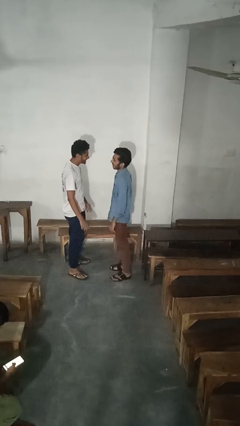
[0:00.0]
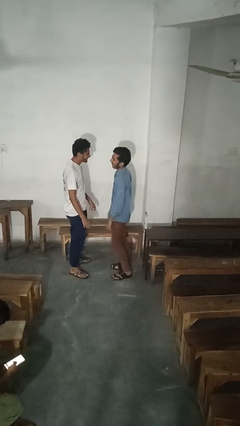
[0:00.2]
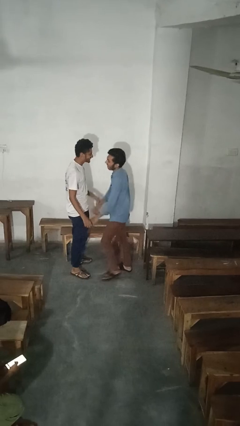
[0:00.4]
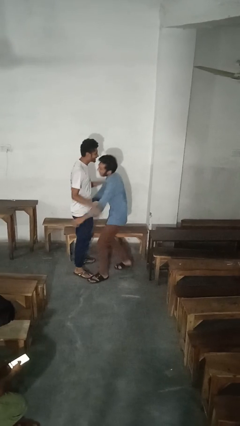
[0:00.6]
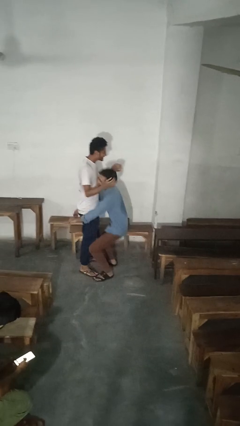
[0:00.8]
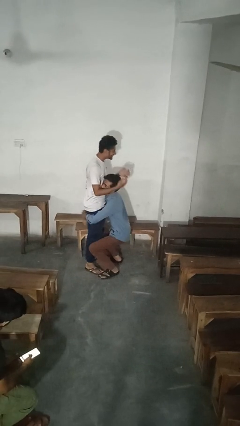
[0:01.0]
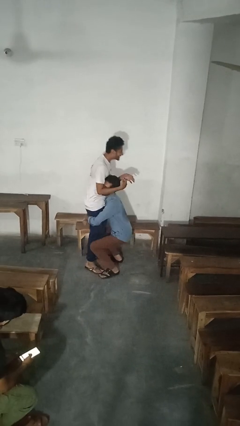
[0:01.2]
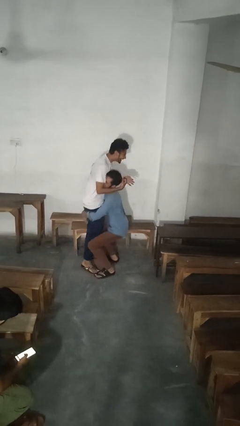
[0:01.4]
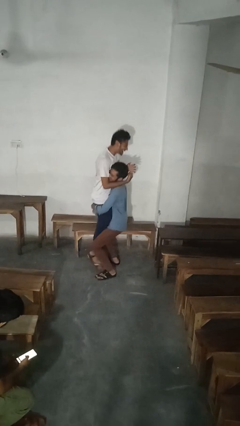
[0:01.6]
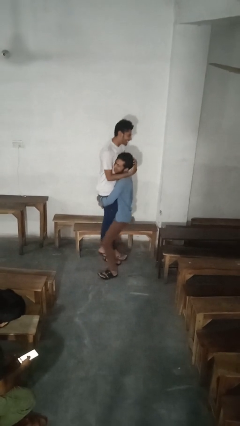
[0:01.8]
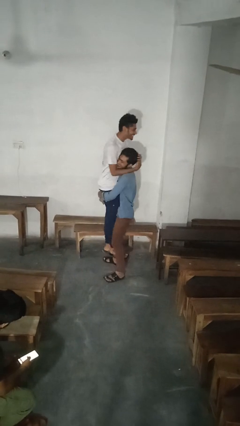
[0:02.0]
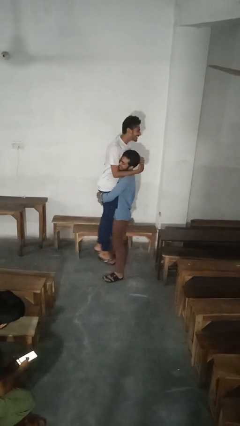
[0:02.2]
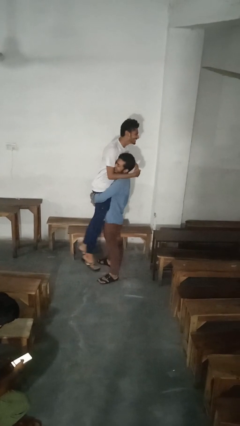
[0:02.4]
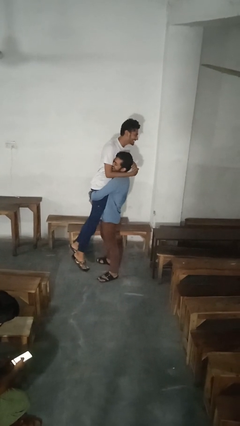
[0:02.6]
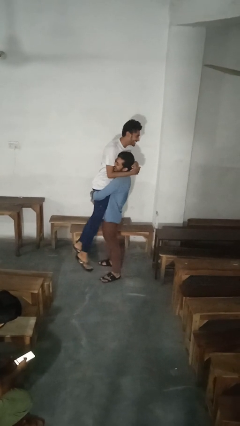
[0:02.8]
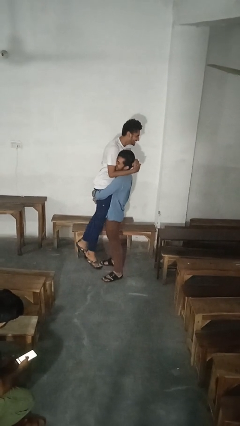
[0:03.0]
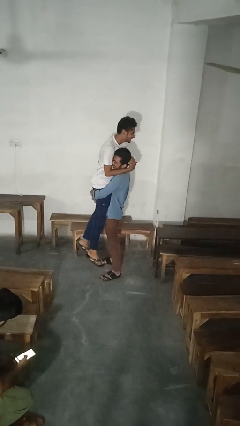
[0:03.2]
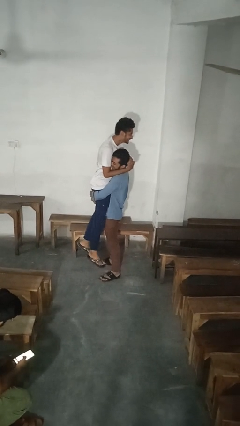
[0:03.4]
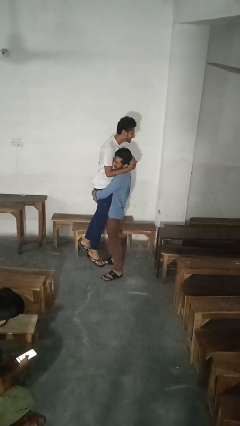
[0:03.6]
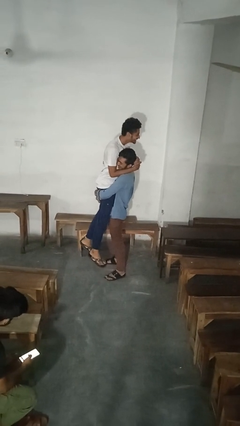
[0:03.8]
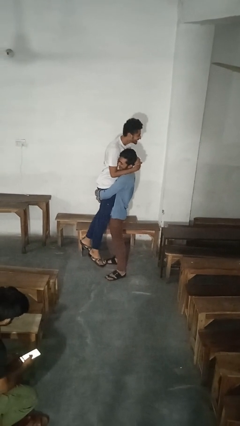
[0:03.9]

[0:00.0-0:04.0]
person picks up person

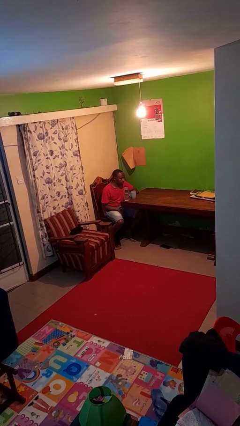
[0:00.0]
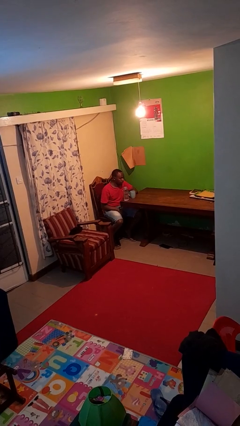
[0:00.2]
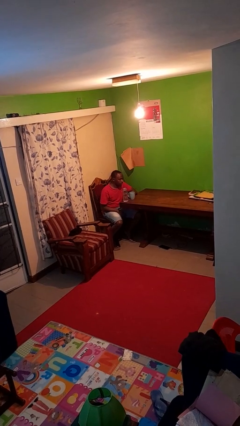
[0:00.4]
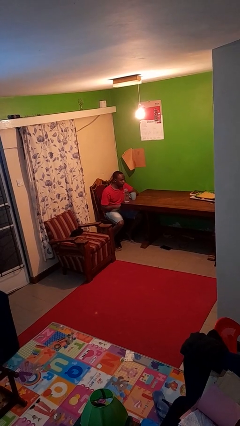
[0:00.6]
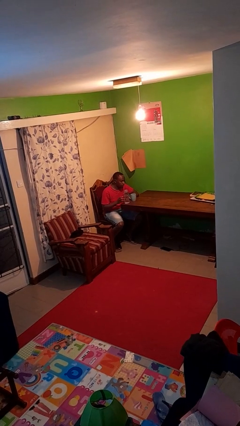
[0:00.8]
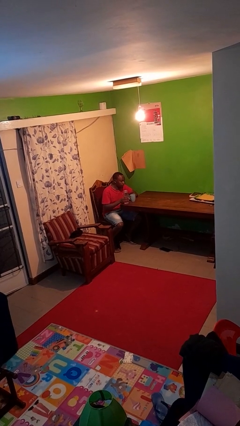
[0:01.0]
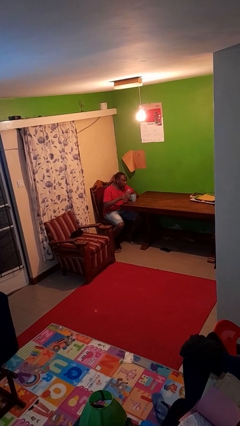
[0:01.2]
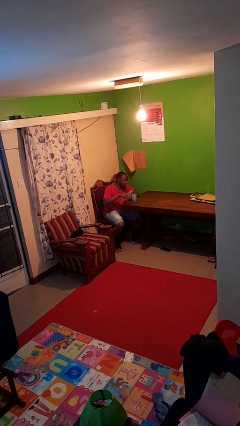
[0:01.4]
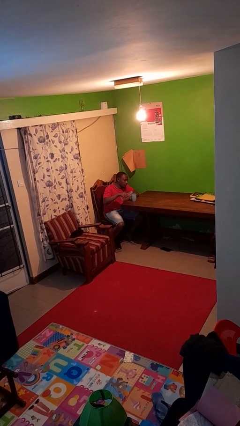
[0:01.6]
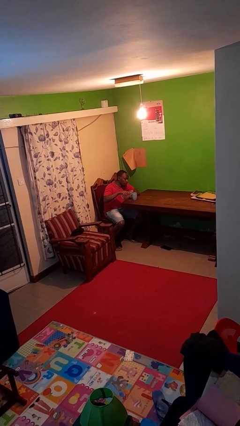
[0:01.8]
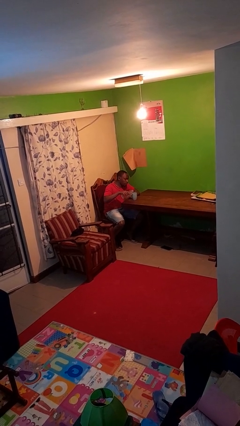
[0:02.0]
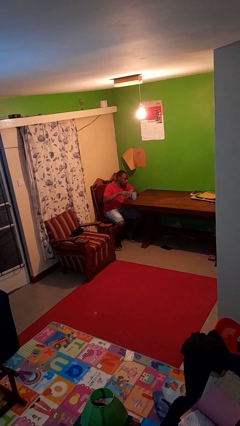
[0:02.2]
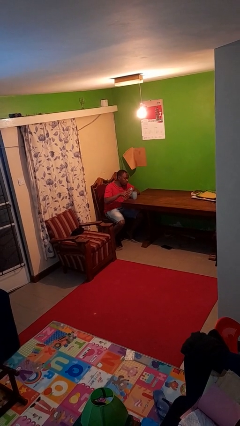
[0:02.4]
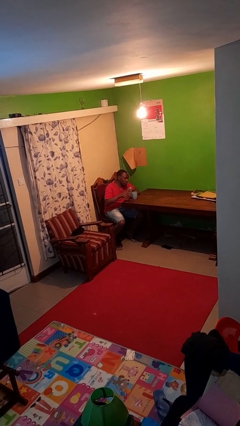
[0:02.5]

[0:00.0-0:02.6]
person pours liquid into cup

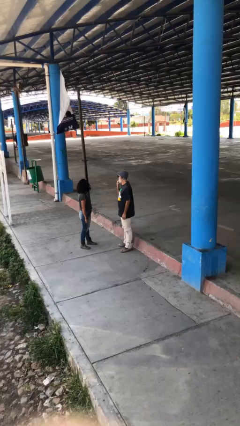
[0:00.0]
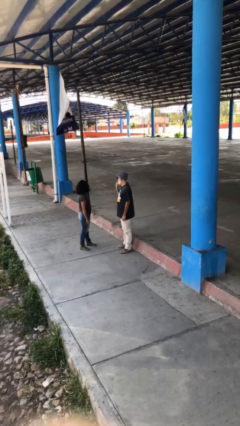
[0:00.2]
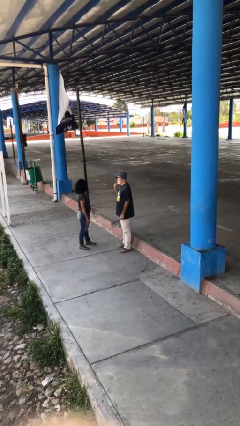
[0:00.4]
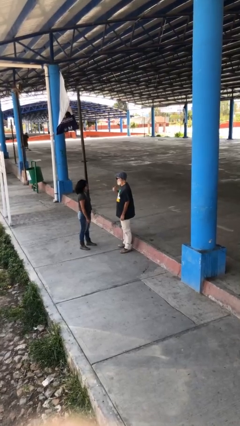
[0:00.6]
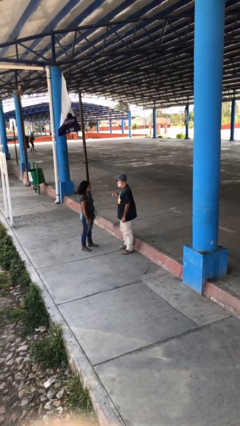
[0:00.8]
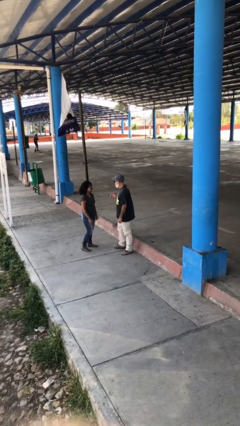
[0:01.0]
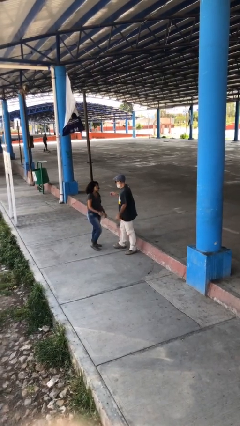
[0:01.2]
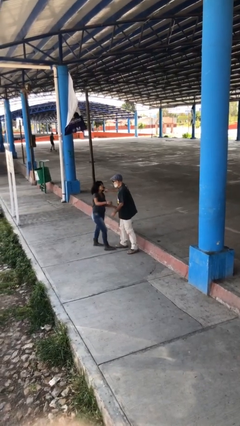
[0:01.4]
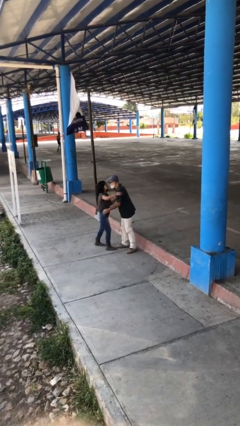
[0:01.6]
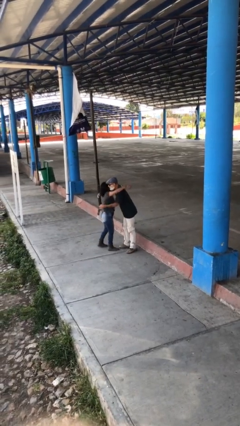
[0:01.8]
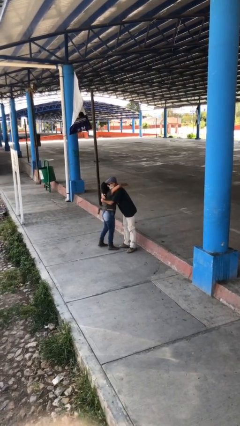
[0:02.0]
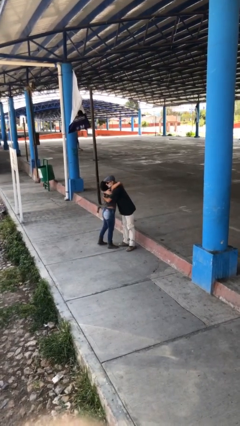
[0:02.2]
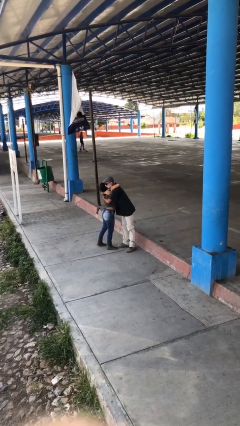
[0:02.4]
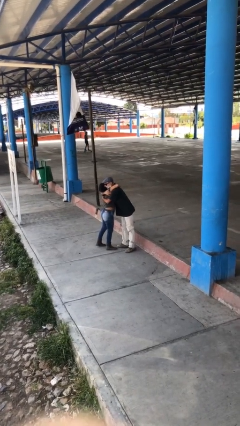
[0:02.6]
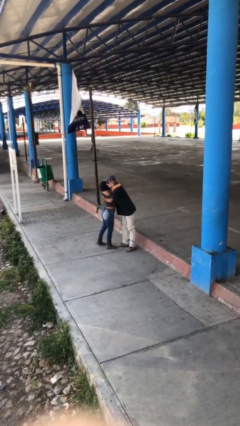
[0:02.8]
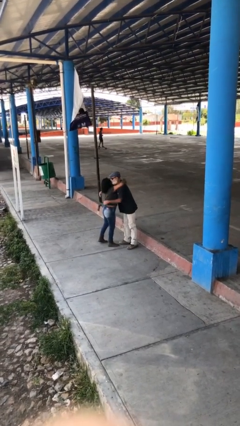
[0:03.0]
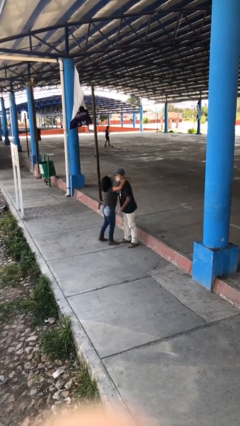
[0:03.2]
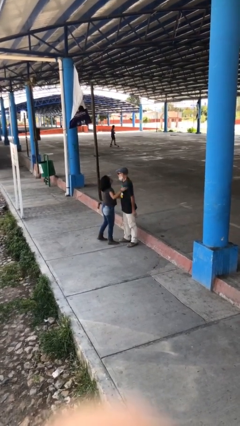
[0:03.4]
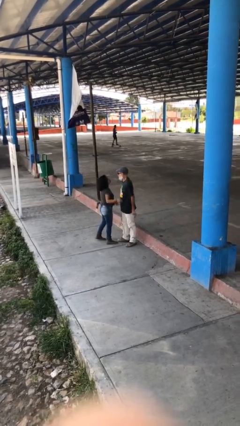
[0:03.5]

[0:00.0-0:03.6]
person embraces person

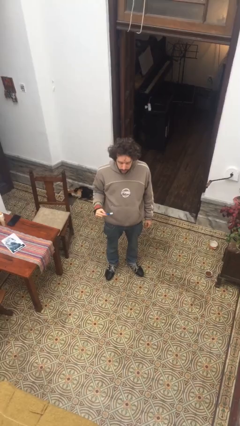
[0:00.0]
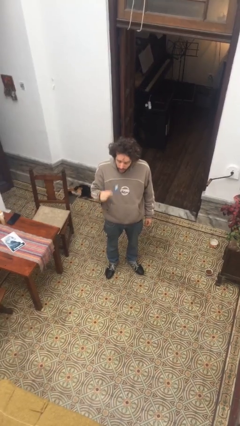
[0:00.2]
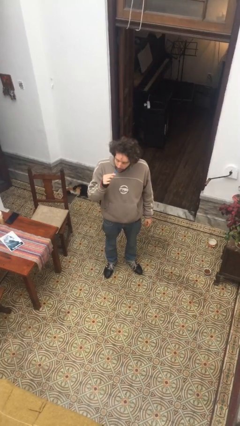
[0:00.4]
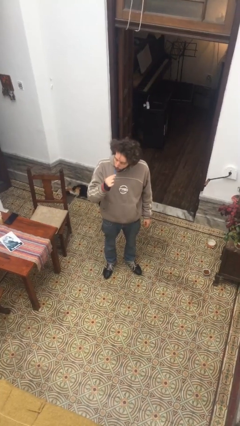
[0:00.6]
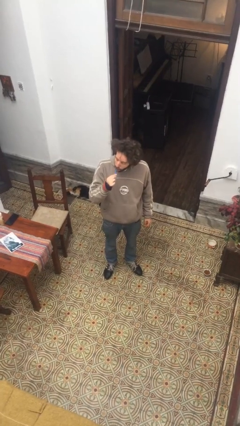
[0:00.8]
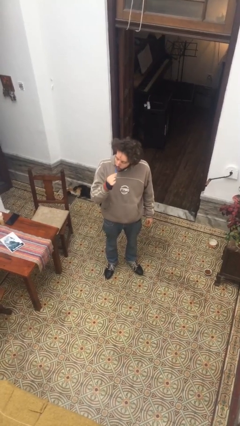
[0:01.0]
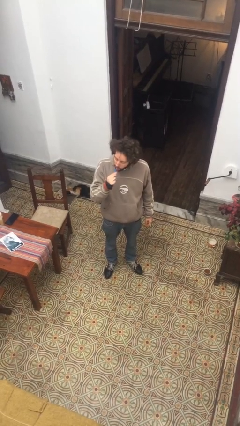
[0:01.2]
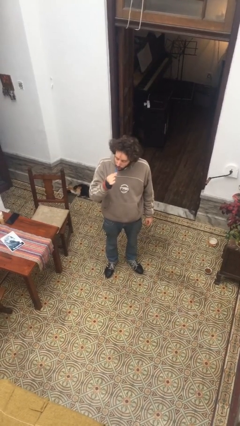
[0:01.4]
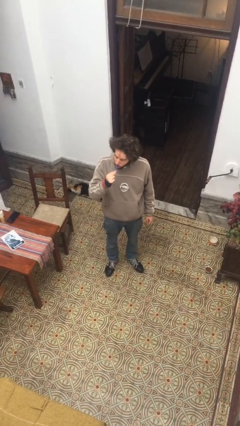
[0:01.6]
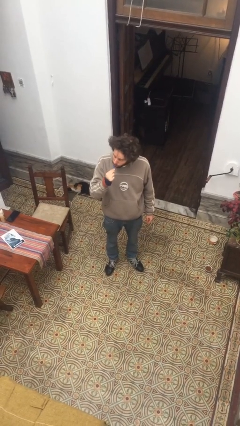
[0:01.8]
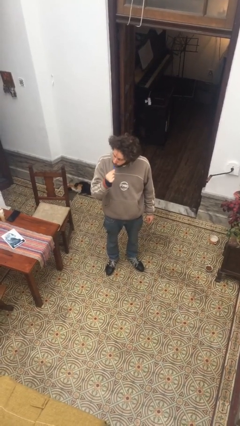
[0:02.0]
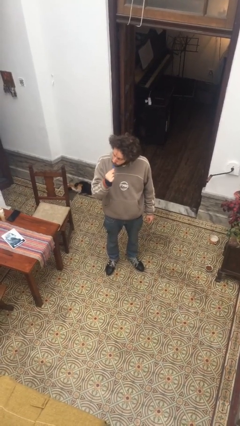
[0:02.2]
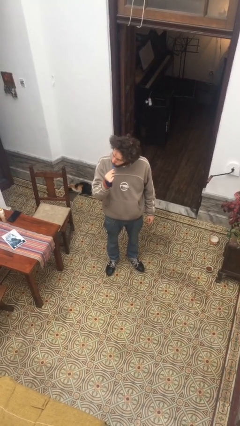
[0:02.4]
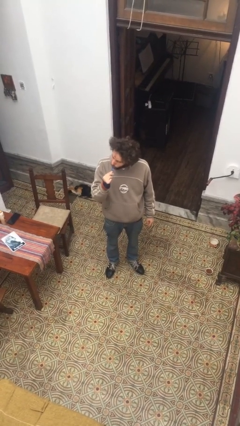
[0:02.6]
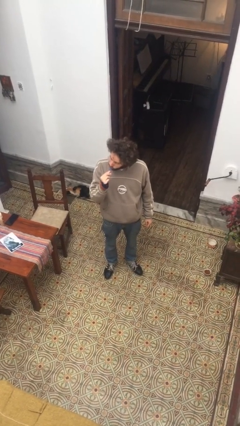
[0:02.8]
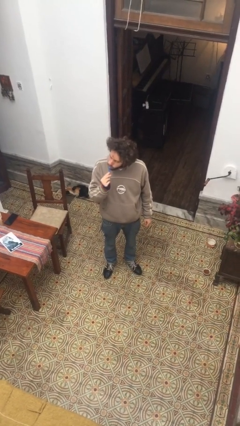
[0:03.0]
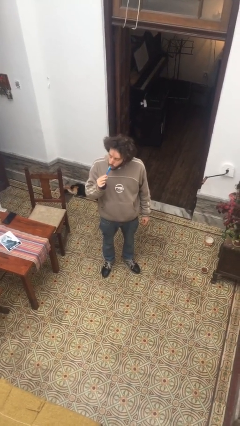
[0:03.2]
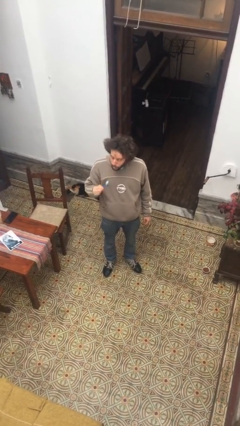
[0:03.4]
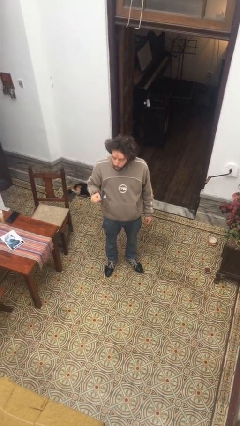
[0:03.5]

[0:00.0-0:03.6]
person brushes teeth

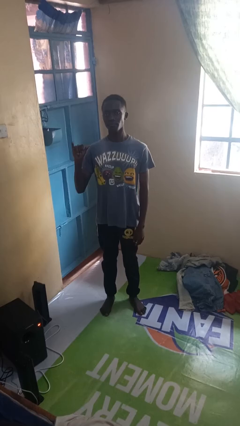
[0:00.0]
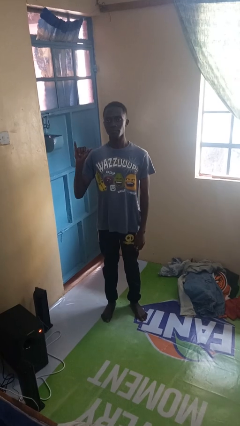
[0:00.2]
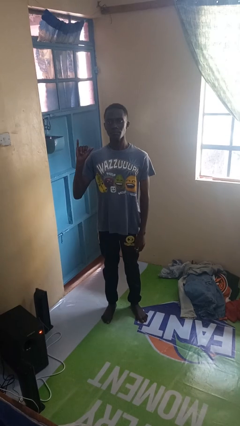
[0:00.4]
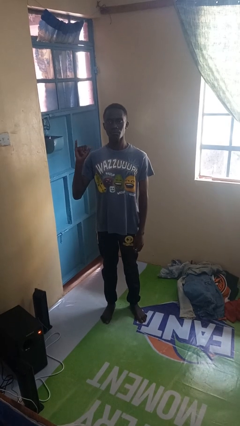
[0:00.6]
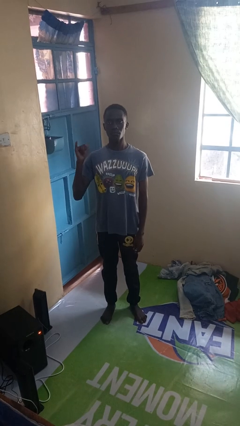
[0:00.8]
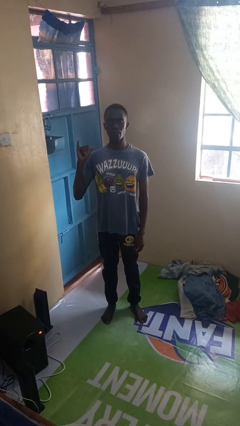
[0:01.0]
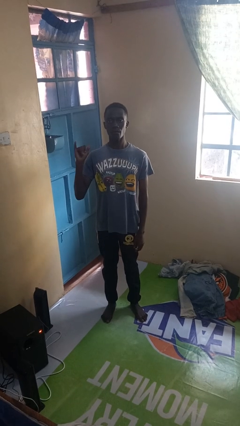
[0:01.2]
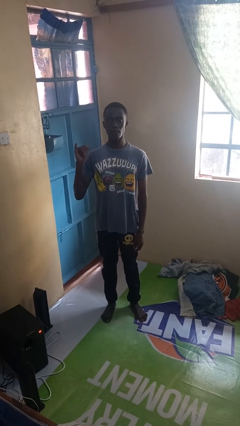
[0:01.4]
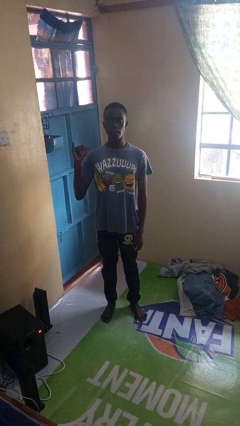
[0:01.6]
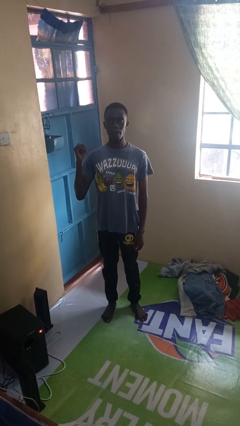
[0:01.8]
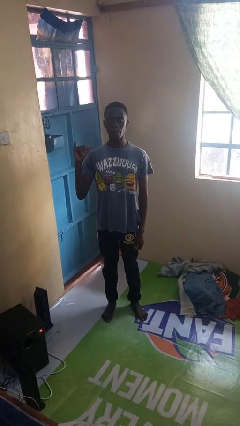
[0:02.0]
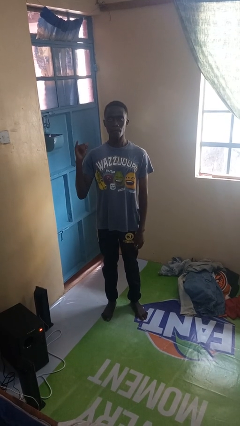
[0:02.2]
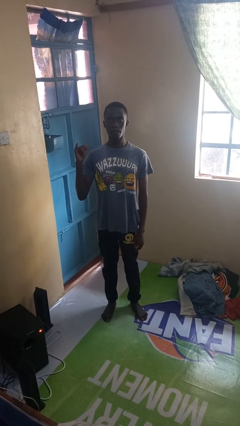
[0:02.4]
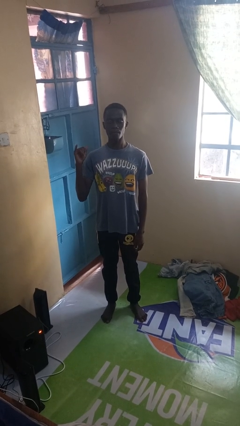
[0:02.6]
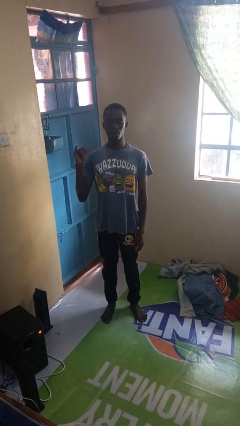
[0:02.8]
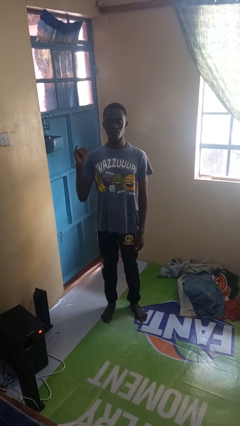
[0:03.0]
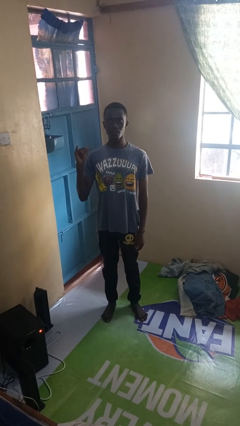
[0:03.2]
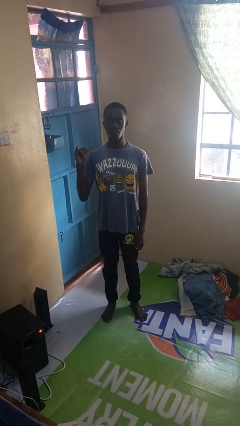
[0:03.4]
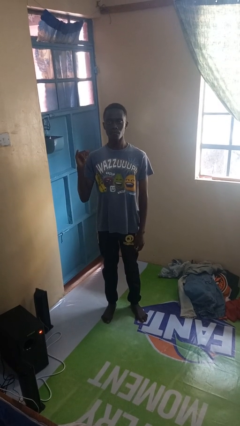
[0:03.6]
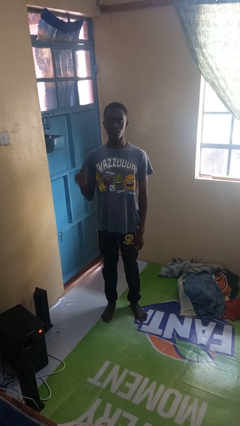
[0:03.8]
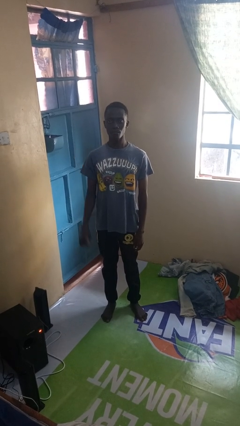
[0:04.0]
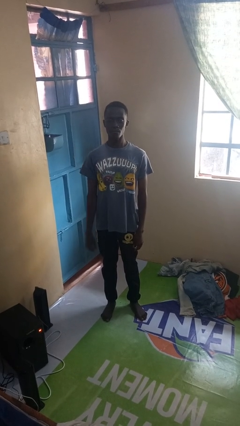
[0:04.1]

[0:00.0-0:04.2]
person gestures hang loose
